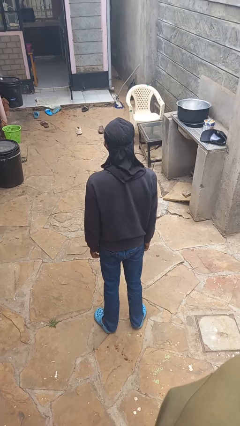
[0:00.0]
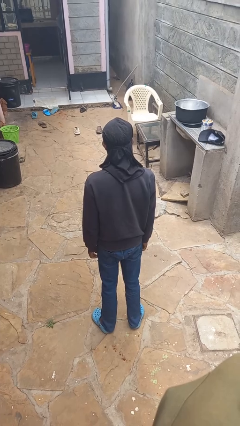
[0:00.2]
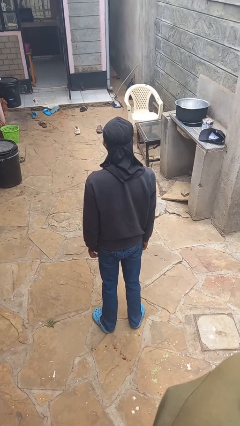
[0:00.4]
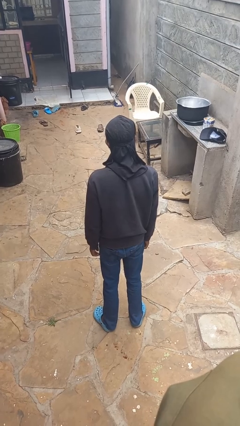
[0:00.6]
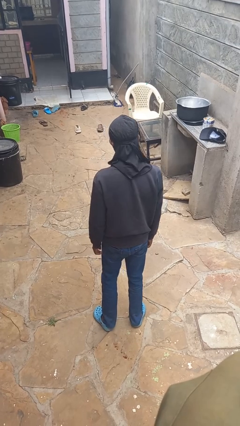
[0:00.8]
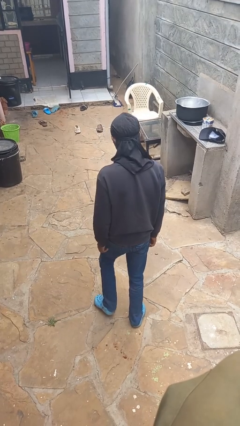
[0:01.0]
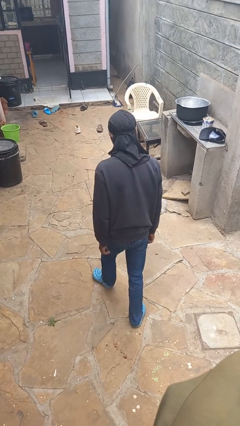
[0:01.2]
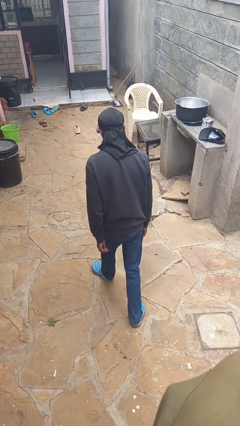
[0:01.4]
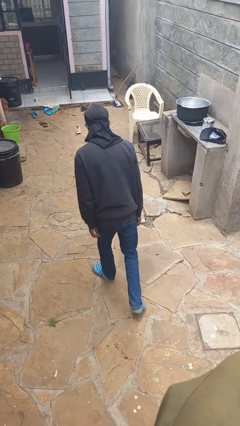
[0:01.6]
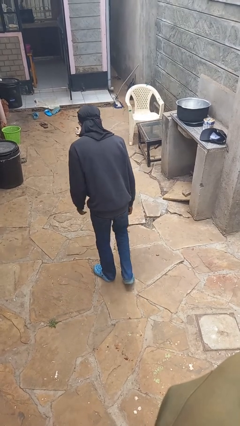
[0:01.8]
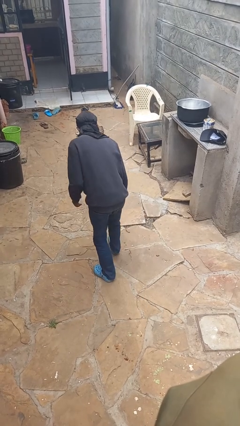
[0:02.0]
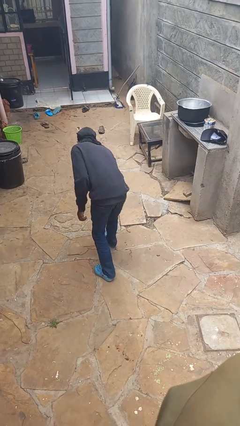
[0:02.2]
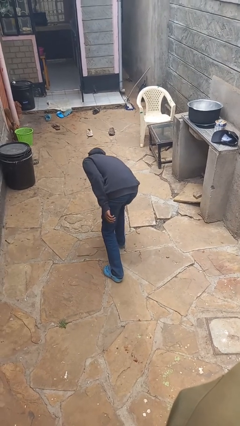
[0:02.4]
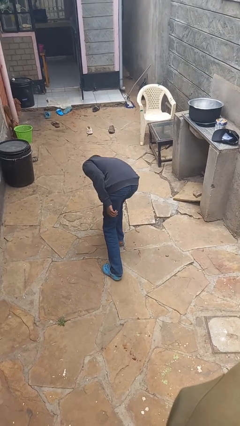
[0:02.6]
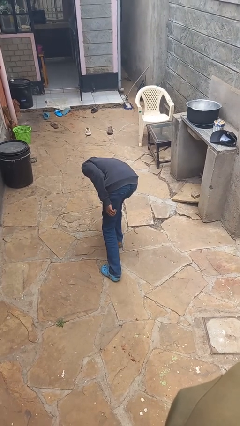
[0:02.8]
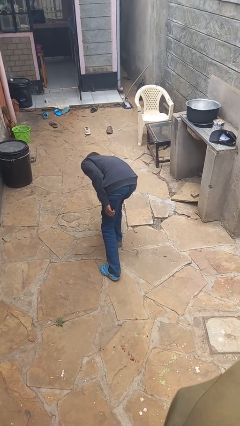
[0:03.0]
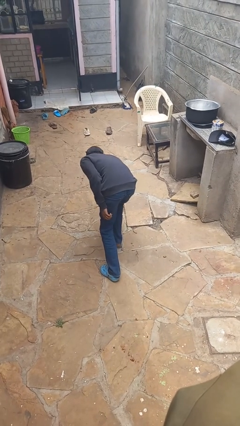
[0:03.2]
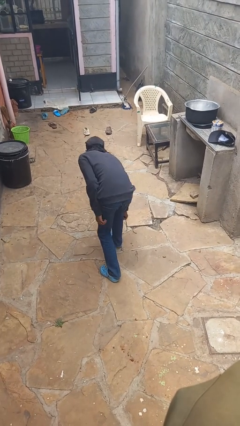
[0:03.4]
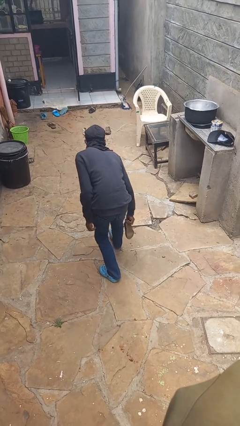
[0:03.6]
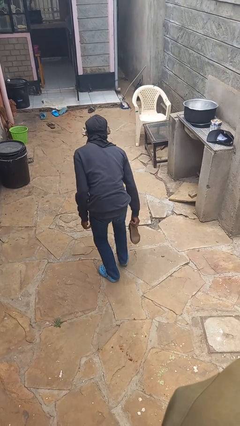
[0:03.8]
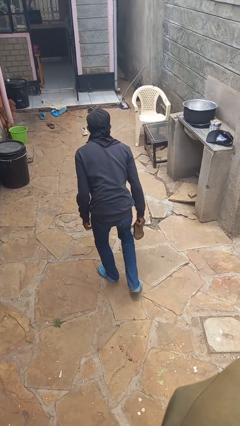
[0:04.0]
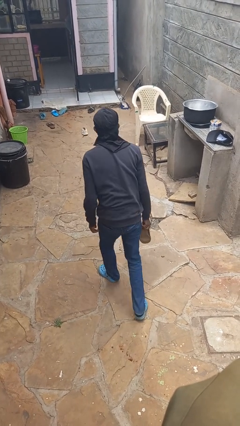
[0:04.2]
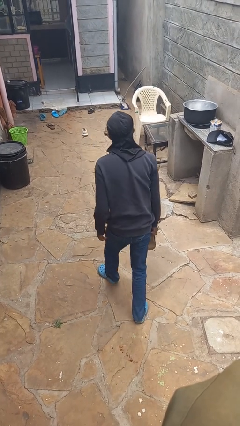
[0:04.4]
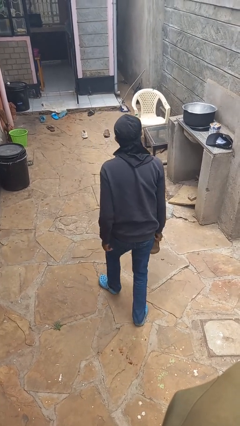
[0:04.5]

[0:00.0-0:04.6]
person picks up object from floor

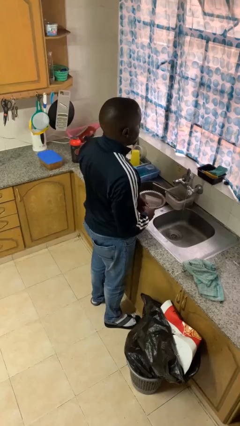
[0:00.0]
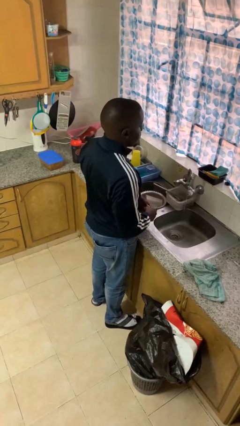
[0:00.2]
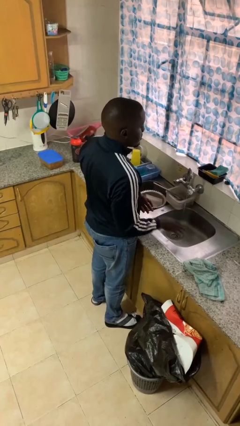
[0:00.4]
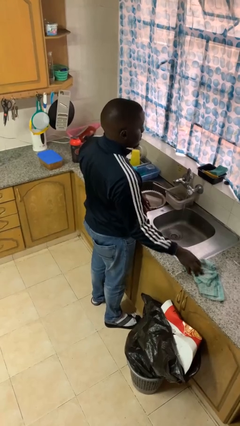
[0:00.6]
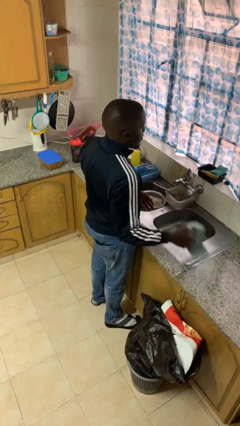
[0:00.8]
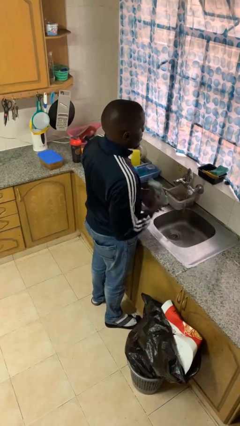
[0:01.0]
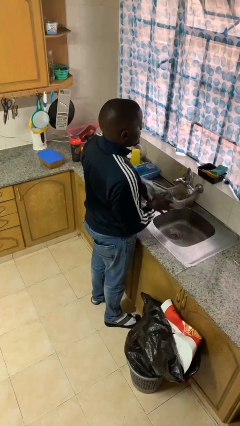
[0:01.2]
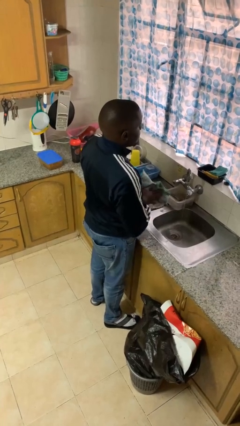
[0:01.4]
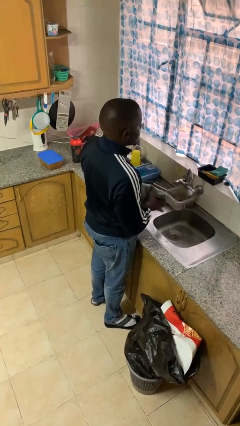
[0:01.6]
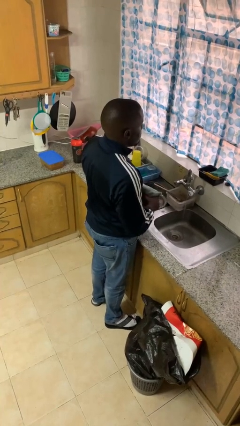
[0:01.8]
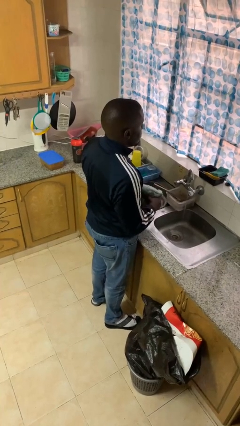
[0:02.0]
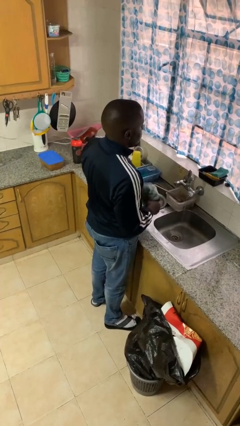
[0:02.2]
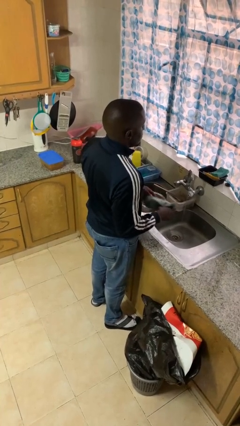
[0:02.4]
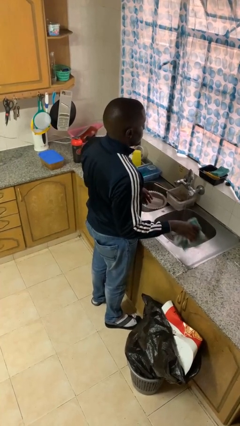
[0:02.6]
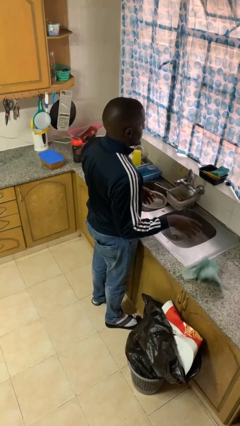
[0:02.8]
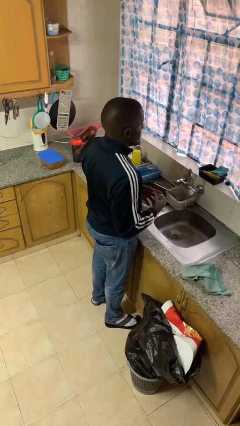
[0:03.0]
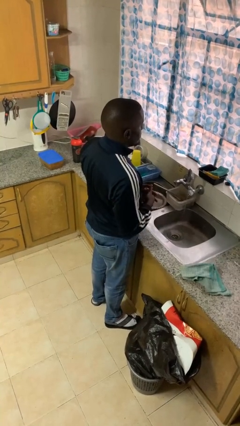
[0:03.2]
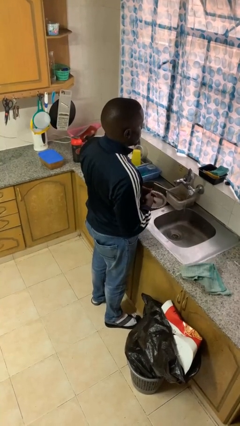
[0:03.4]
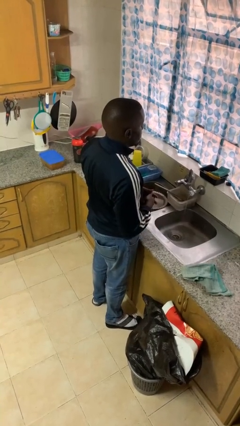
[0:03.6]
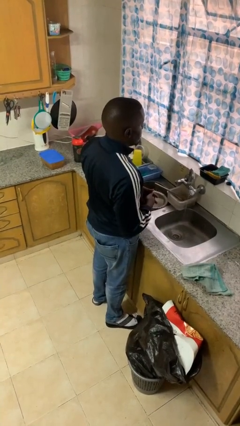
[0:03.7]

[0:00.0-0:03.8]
person dries hands with towel

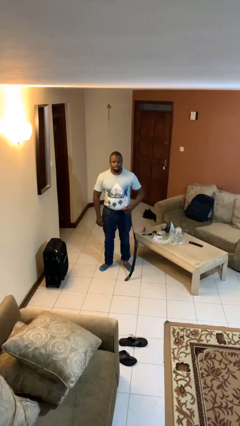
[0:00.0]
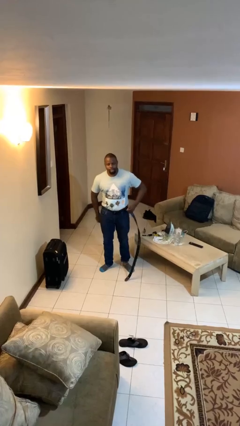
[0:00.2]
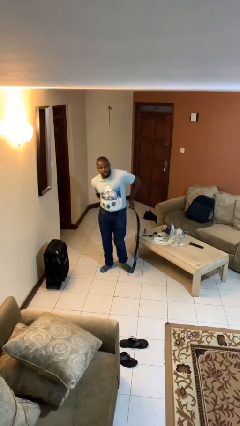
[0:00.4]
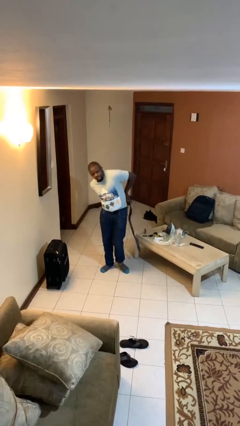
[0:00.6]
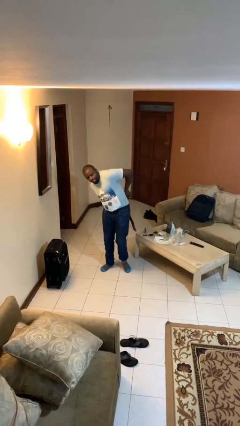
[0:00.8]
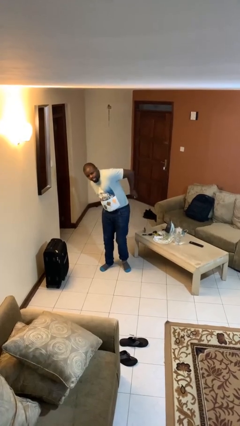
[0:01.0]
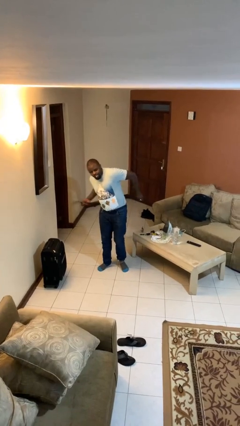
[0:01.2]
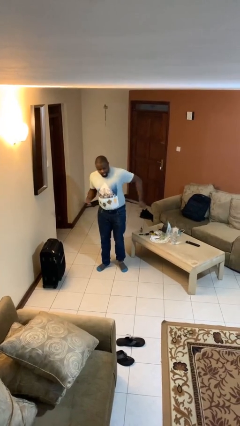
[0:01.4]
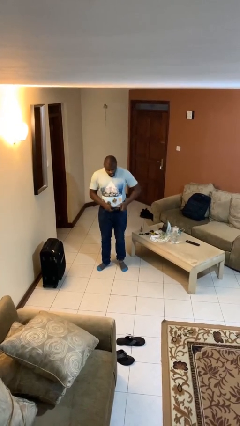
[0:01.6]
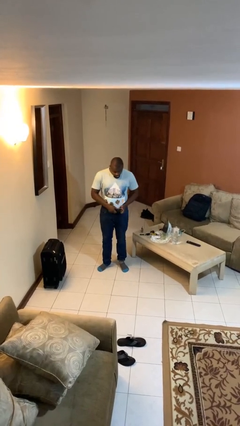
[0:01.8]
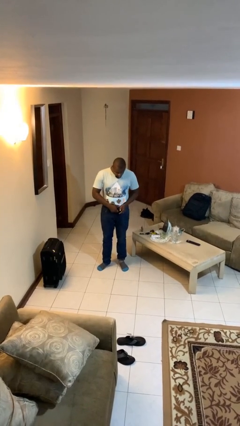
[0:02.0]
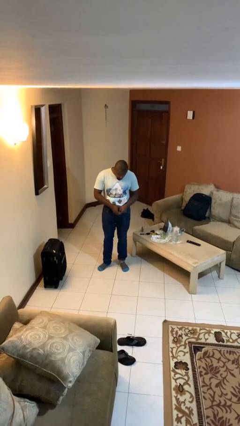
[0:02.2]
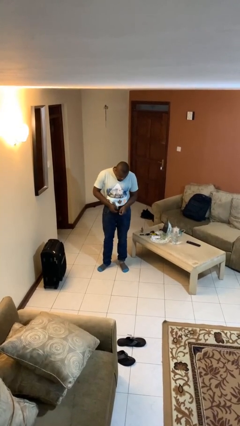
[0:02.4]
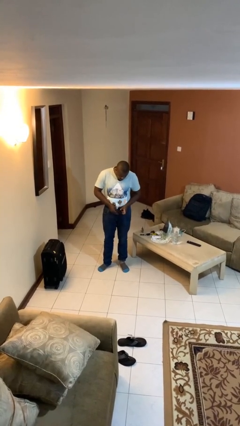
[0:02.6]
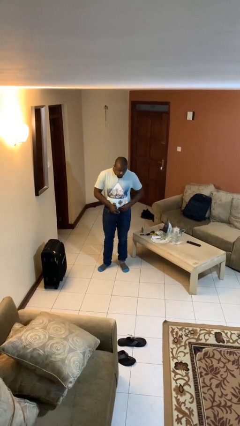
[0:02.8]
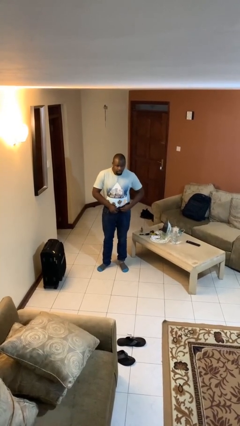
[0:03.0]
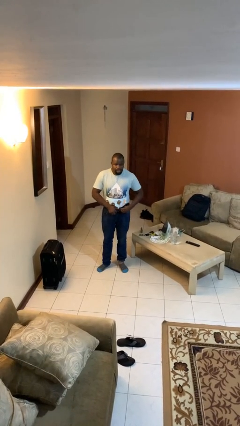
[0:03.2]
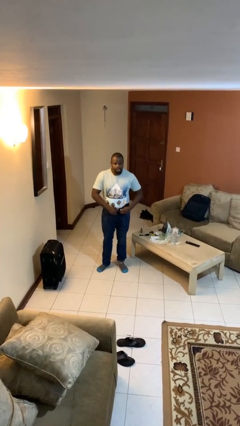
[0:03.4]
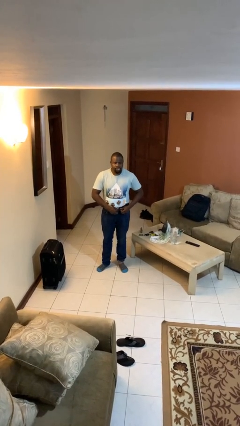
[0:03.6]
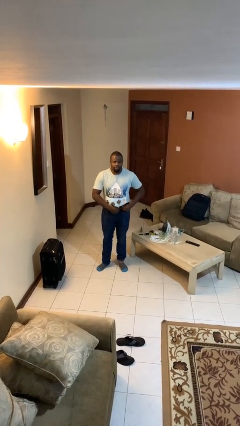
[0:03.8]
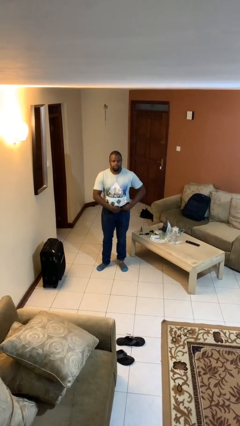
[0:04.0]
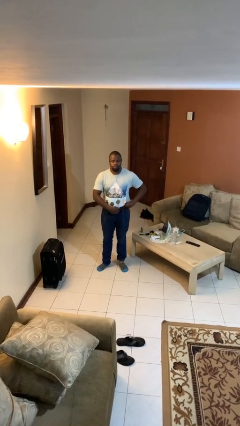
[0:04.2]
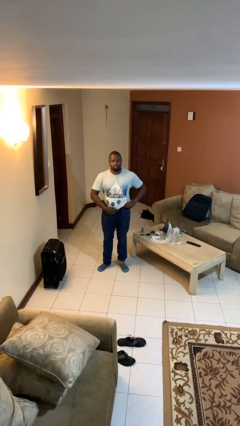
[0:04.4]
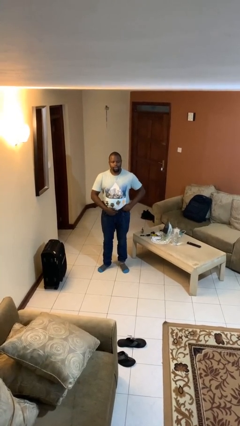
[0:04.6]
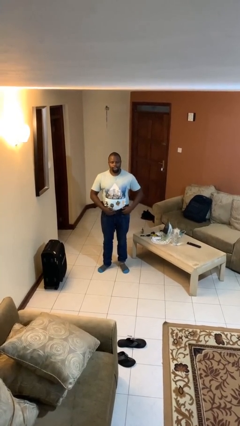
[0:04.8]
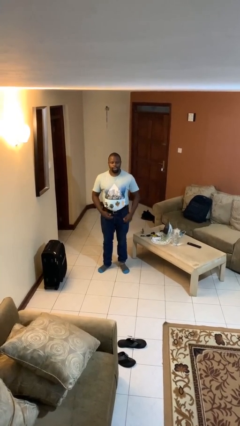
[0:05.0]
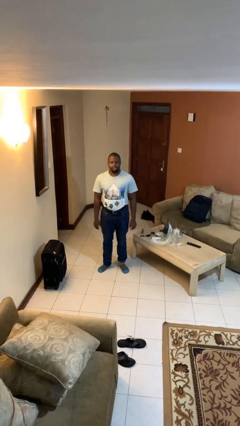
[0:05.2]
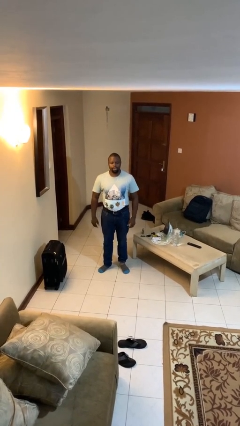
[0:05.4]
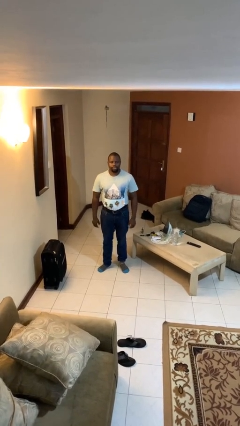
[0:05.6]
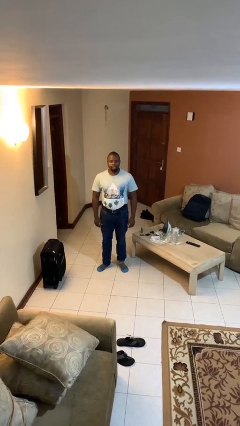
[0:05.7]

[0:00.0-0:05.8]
person puts on belt

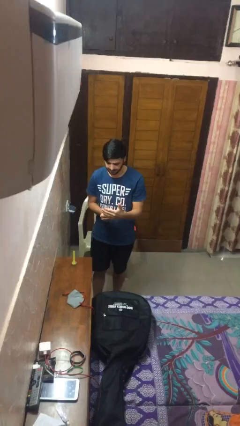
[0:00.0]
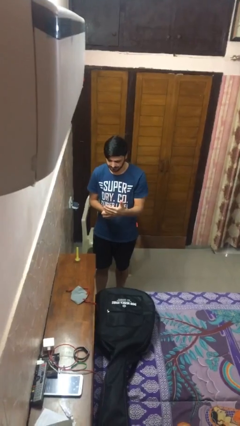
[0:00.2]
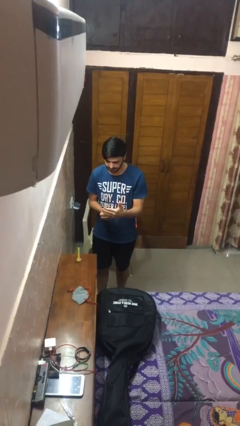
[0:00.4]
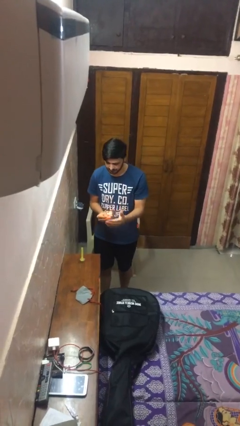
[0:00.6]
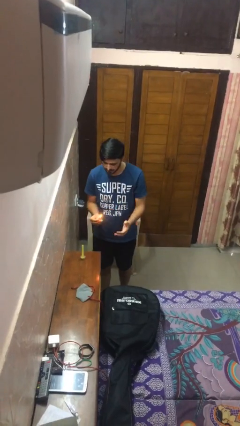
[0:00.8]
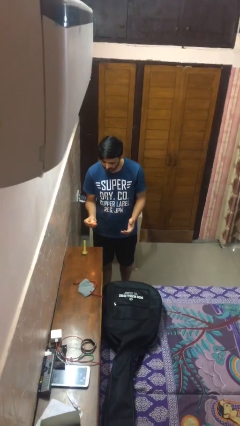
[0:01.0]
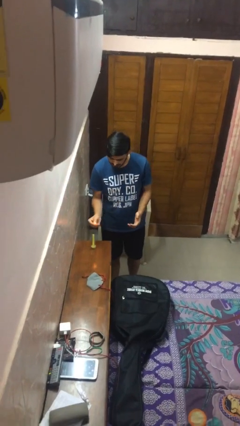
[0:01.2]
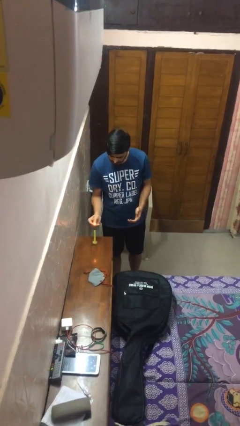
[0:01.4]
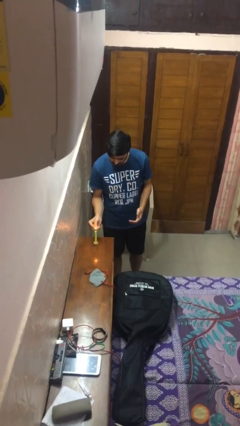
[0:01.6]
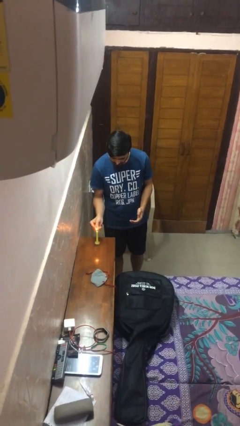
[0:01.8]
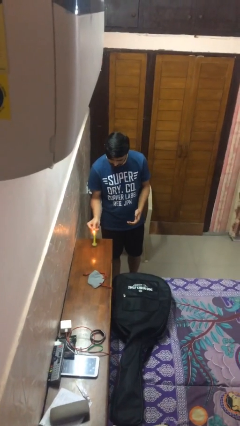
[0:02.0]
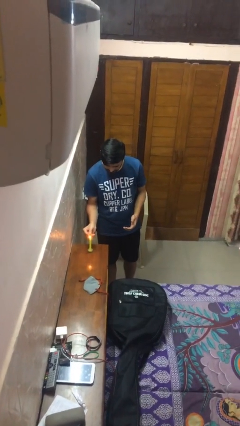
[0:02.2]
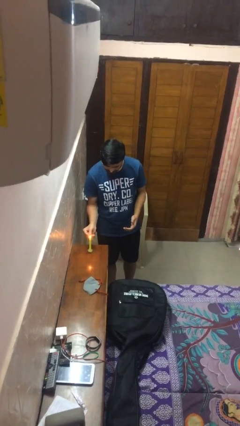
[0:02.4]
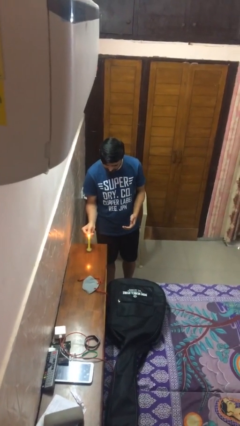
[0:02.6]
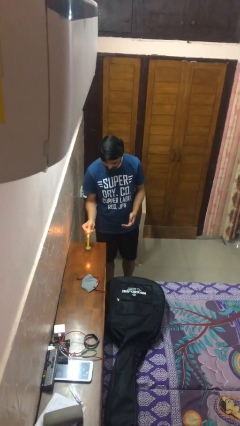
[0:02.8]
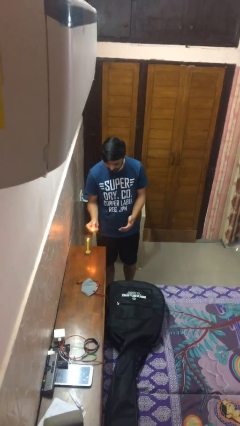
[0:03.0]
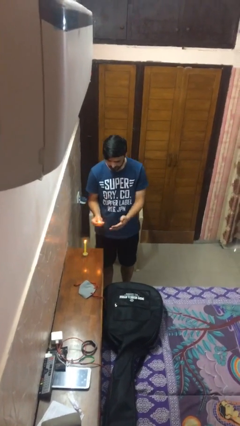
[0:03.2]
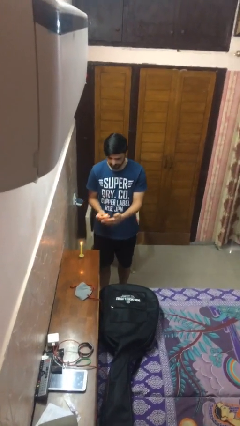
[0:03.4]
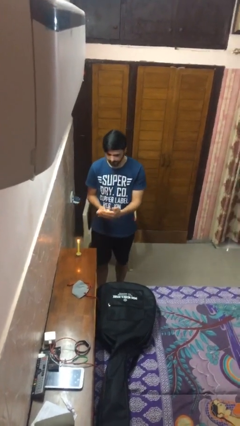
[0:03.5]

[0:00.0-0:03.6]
person lights candle
